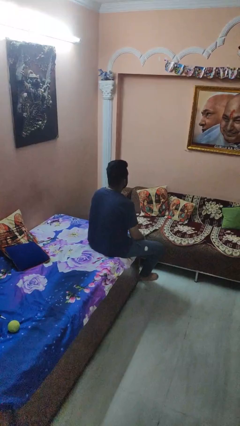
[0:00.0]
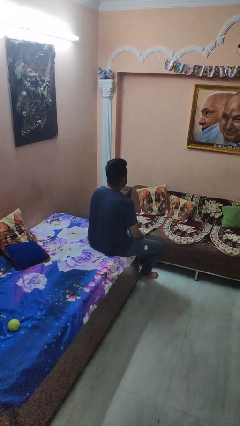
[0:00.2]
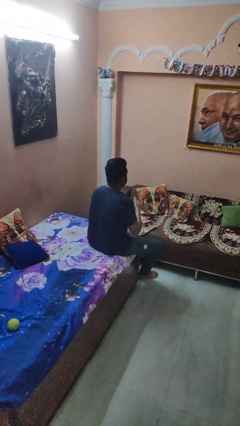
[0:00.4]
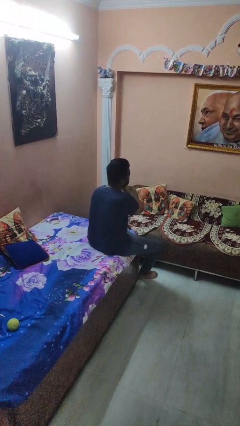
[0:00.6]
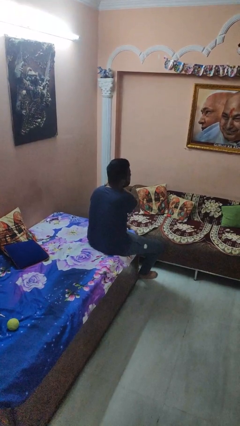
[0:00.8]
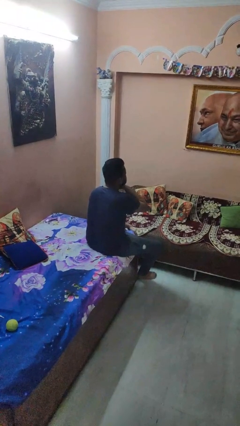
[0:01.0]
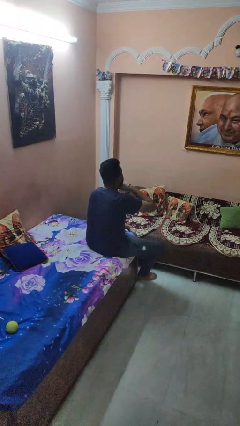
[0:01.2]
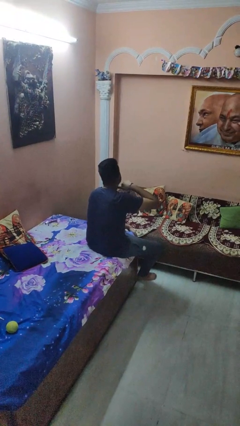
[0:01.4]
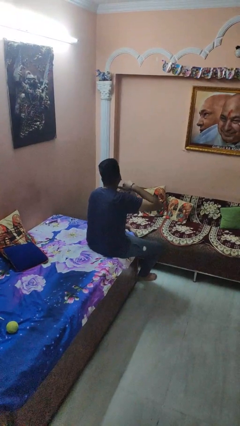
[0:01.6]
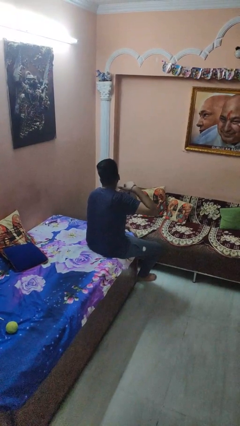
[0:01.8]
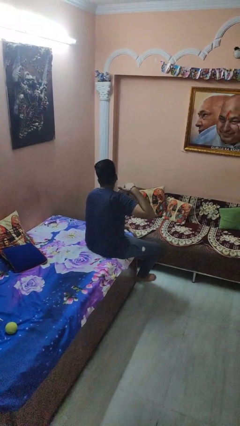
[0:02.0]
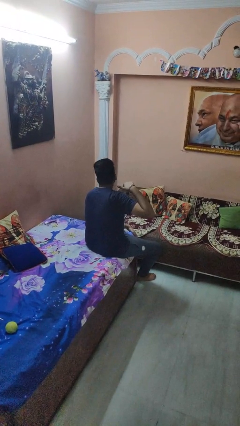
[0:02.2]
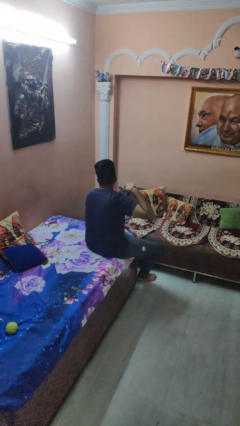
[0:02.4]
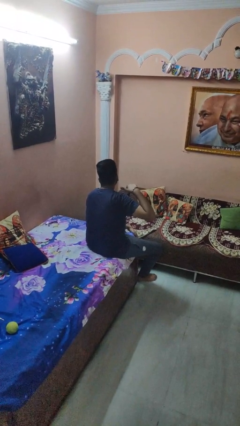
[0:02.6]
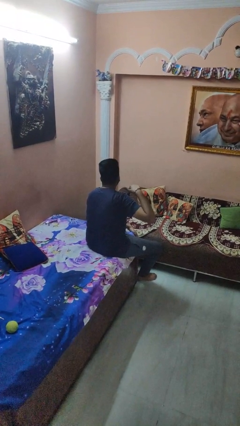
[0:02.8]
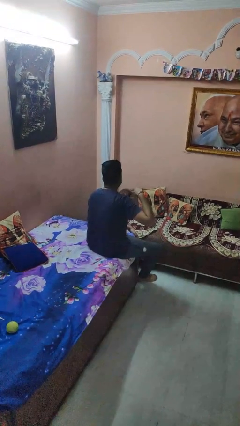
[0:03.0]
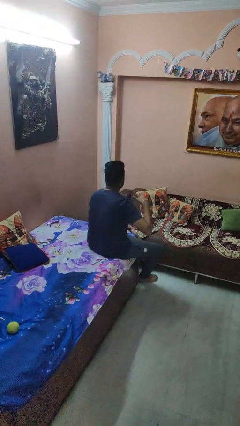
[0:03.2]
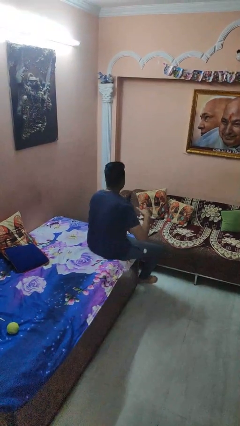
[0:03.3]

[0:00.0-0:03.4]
person gestures cut

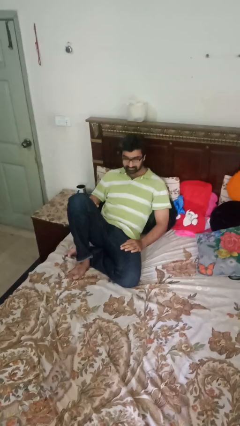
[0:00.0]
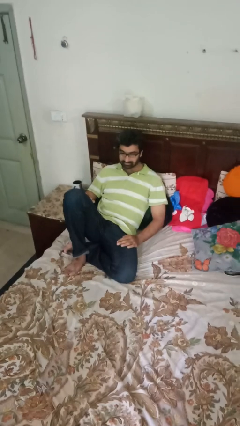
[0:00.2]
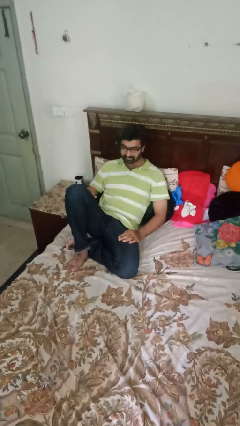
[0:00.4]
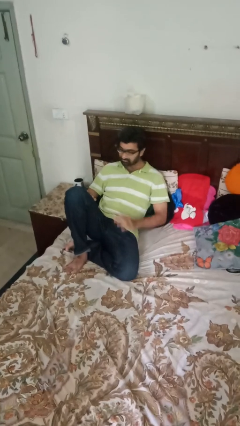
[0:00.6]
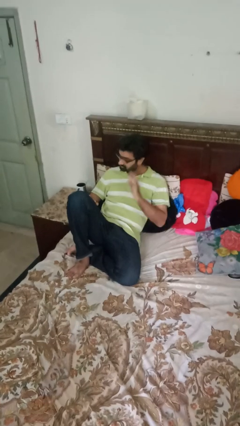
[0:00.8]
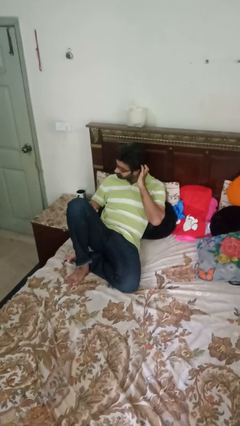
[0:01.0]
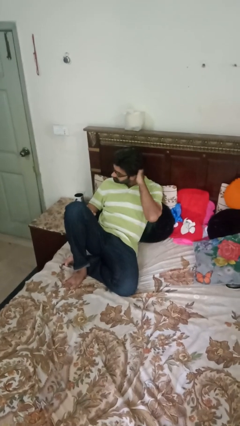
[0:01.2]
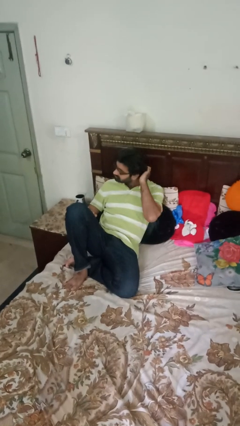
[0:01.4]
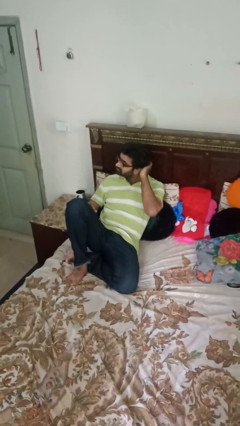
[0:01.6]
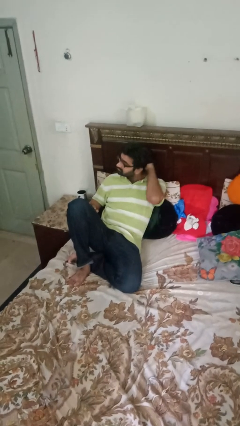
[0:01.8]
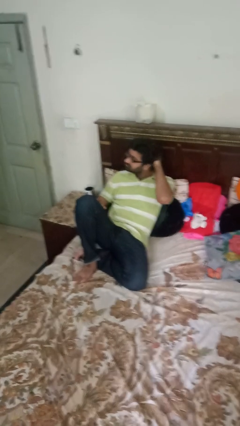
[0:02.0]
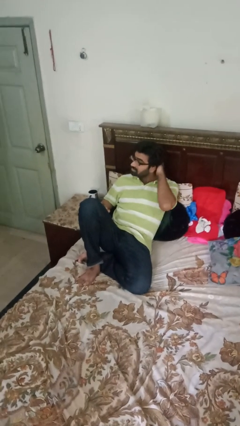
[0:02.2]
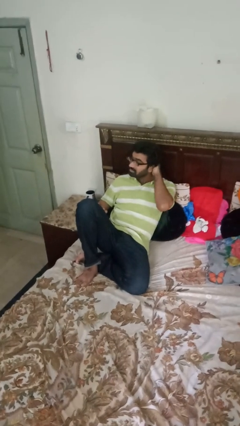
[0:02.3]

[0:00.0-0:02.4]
person strokes hair

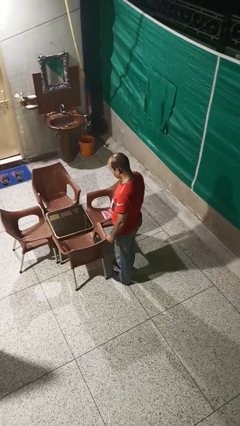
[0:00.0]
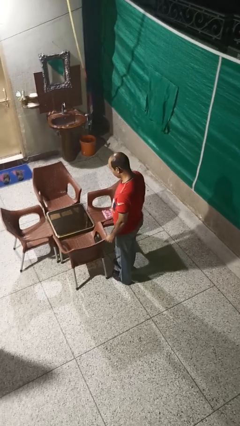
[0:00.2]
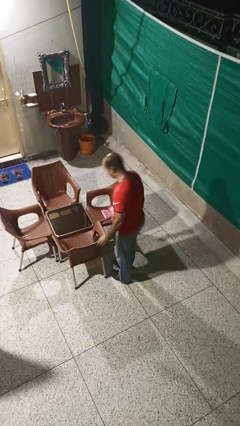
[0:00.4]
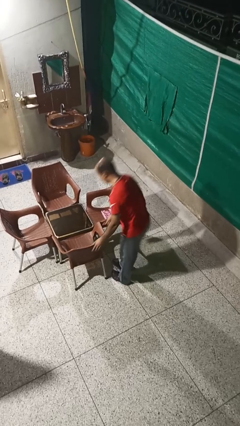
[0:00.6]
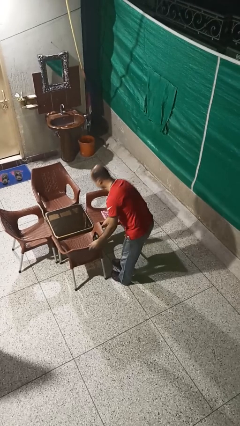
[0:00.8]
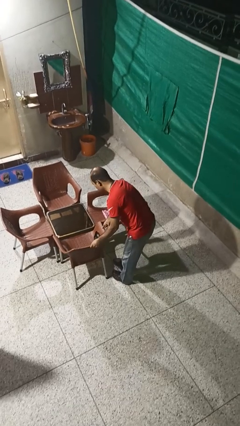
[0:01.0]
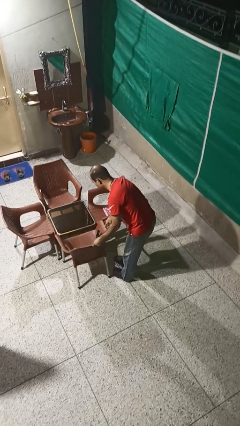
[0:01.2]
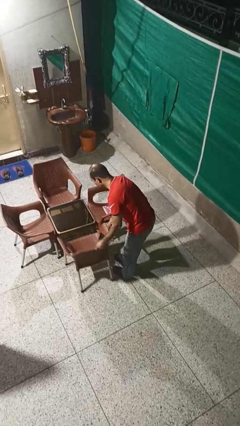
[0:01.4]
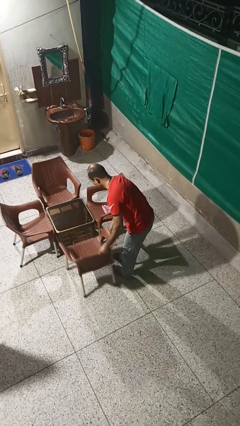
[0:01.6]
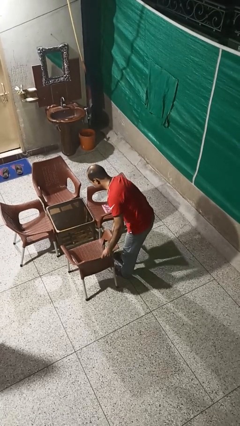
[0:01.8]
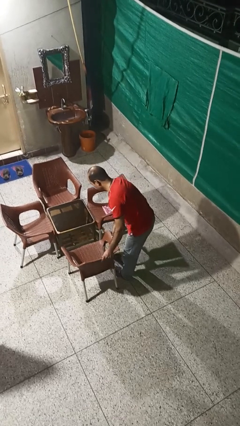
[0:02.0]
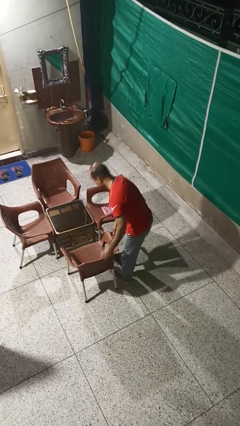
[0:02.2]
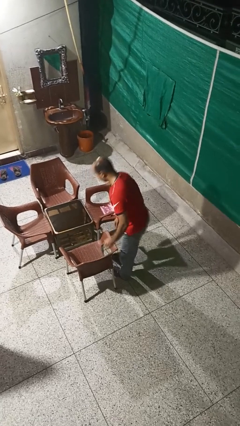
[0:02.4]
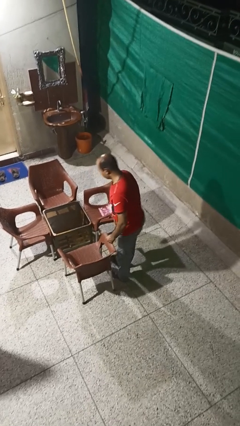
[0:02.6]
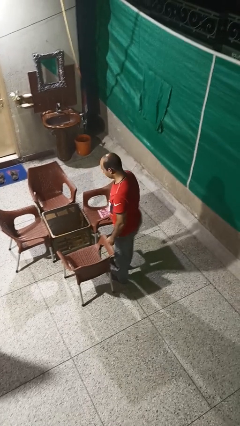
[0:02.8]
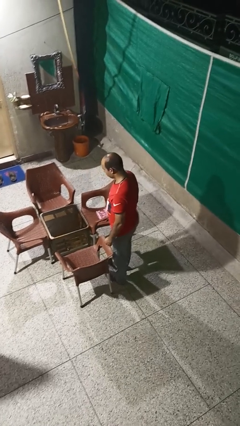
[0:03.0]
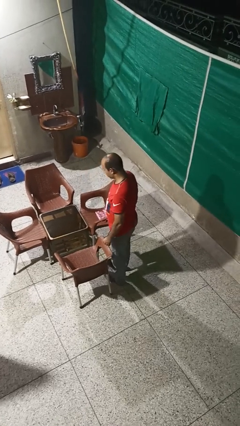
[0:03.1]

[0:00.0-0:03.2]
person pulls out chair

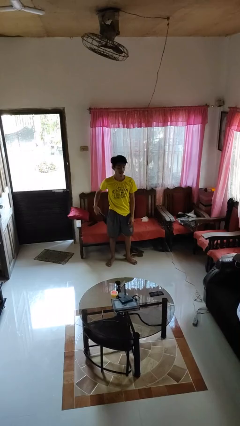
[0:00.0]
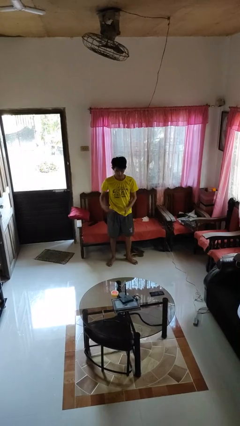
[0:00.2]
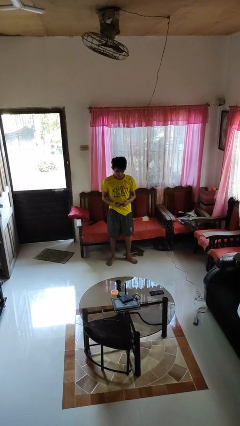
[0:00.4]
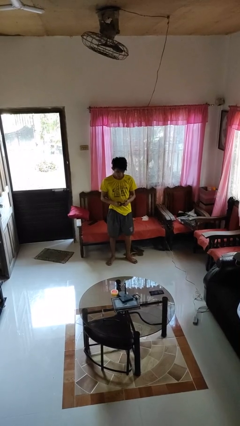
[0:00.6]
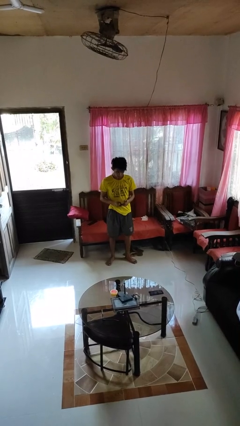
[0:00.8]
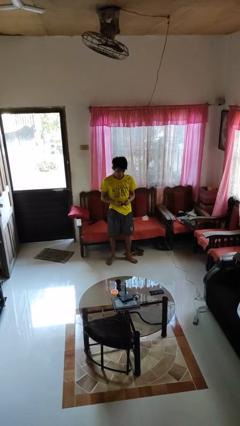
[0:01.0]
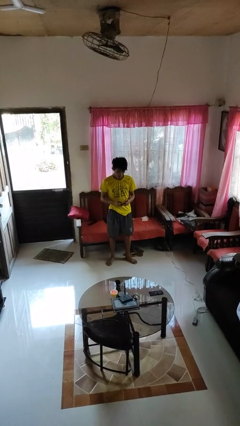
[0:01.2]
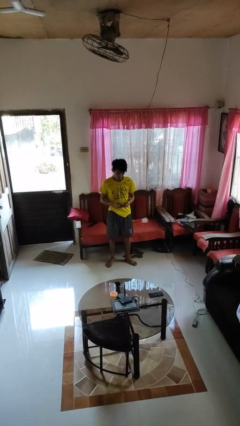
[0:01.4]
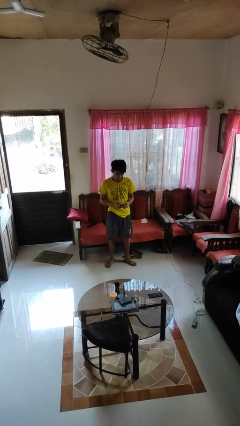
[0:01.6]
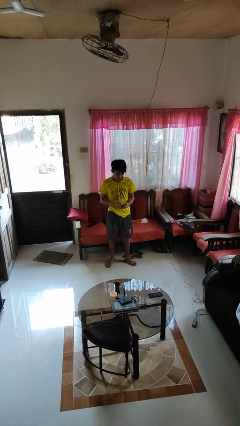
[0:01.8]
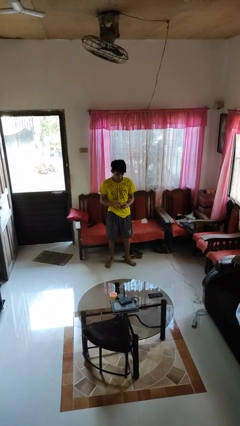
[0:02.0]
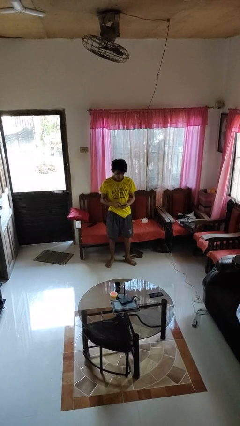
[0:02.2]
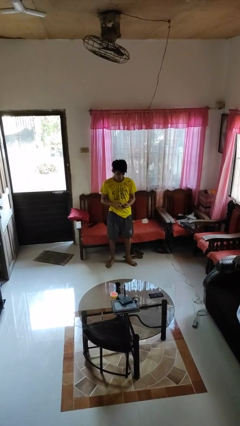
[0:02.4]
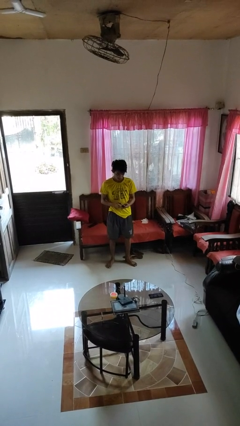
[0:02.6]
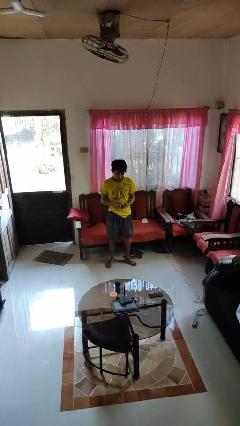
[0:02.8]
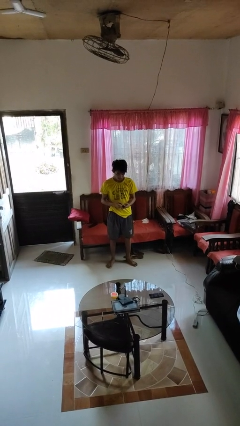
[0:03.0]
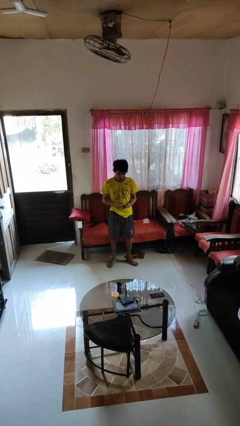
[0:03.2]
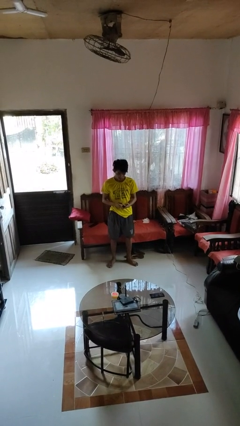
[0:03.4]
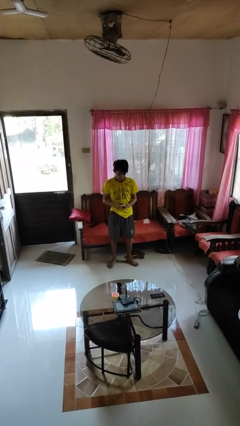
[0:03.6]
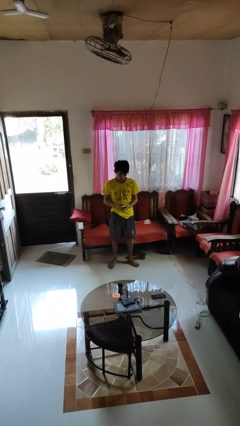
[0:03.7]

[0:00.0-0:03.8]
person takes phone from pocket

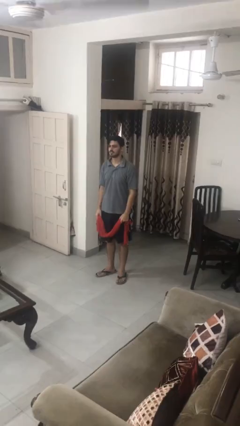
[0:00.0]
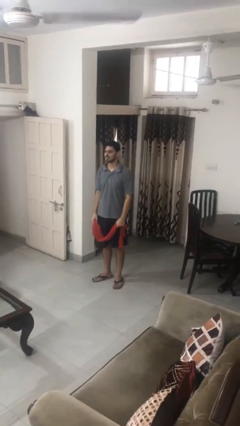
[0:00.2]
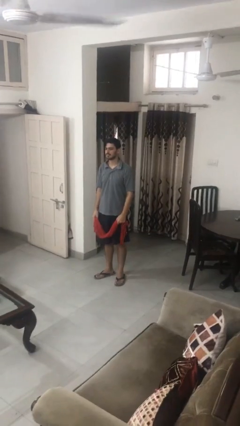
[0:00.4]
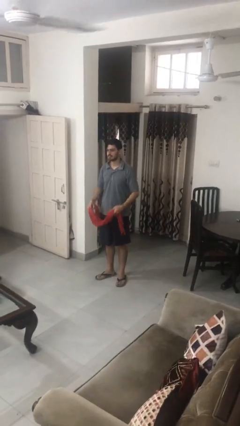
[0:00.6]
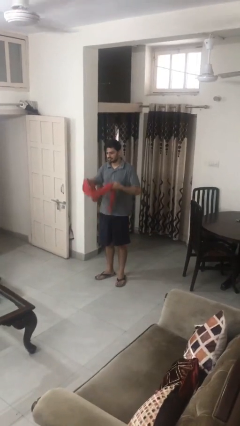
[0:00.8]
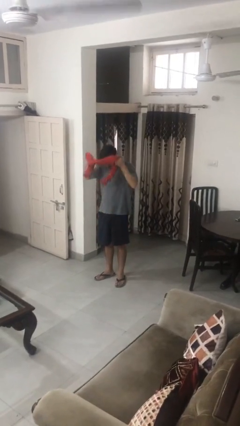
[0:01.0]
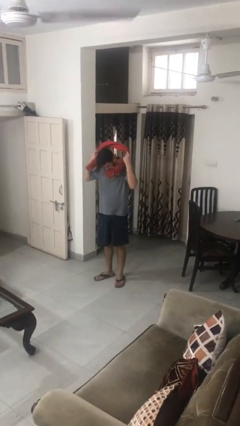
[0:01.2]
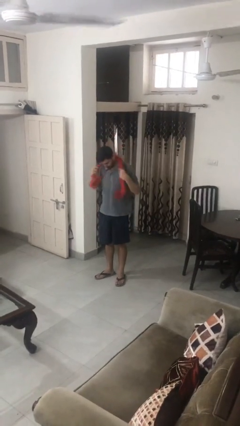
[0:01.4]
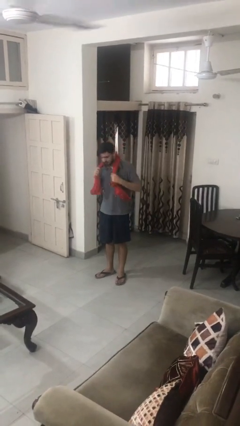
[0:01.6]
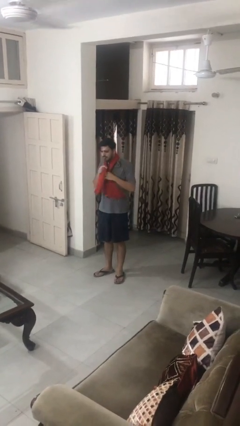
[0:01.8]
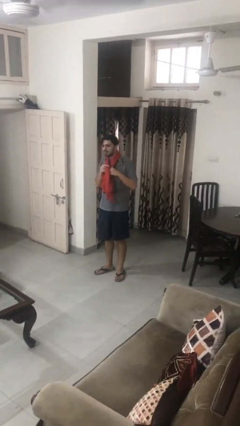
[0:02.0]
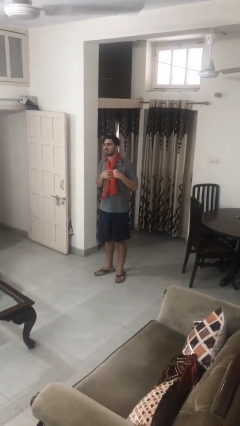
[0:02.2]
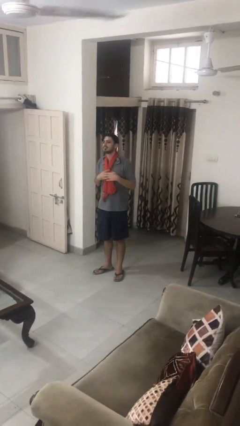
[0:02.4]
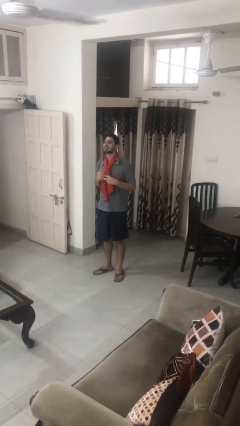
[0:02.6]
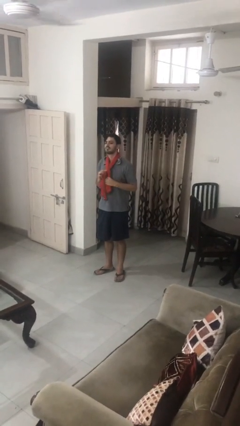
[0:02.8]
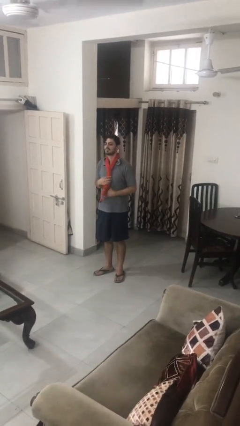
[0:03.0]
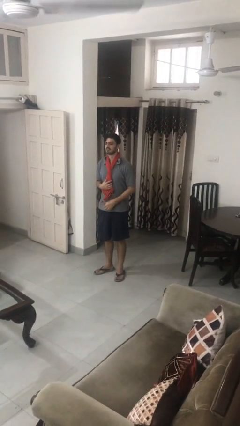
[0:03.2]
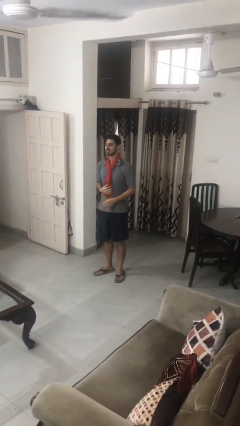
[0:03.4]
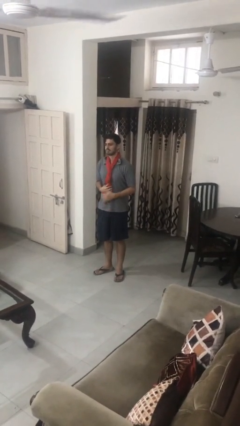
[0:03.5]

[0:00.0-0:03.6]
person puts on scarf

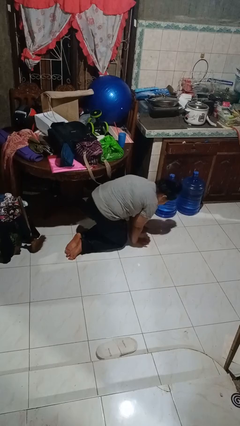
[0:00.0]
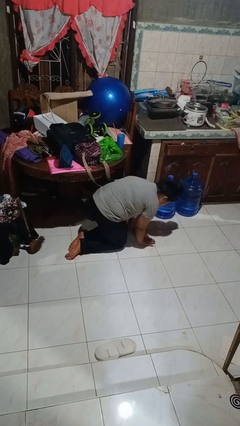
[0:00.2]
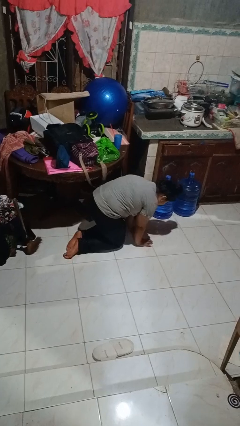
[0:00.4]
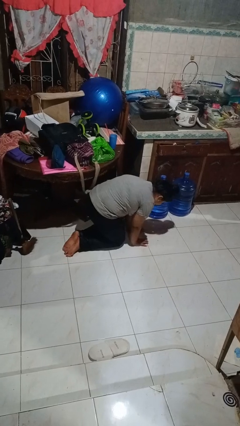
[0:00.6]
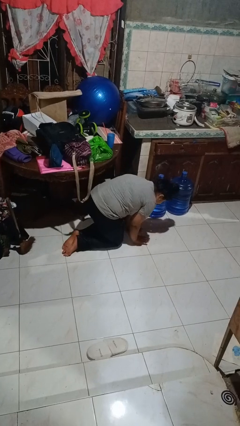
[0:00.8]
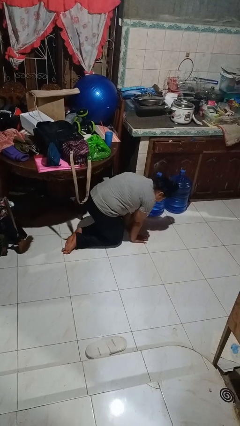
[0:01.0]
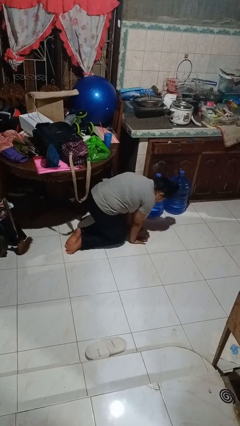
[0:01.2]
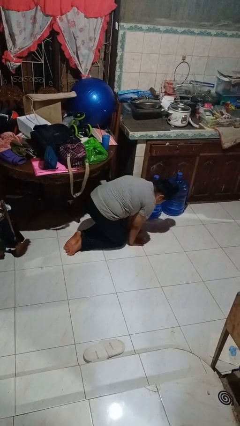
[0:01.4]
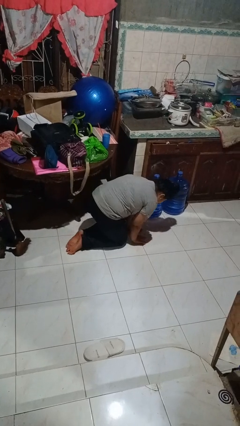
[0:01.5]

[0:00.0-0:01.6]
person crawls
